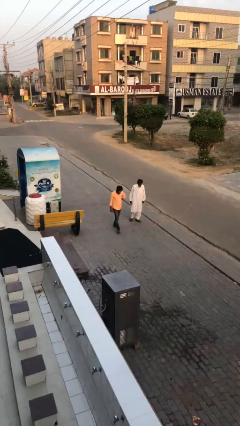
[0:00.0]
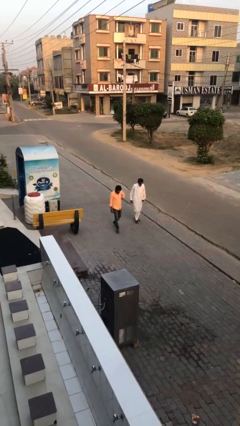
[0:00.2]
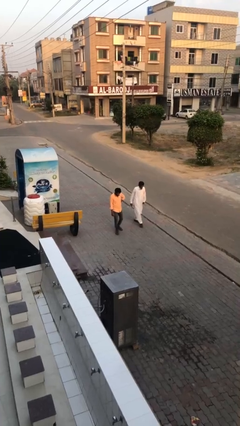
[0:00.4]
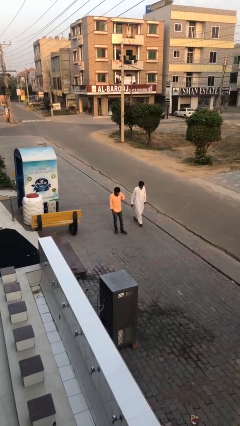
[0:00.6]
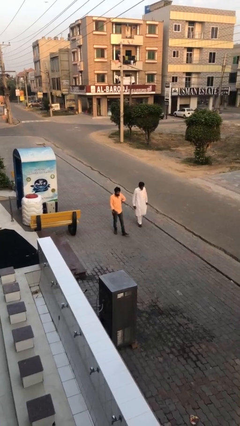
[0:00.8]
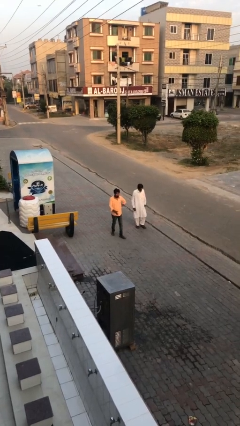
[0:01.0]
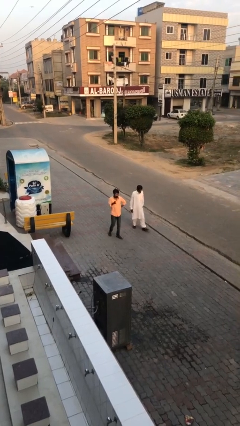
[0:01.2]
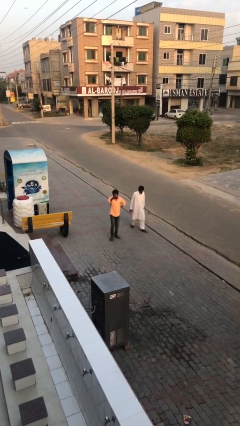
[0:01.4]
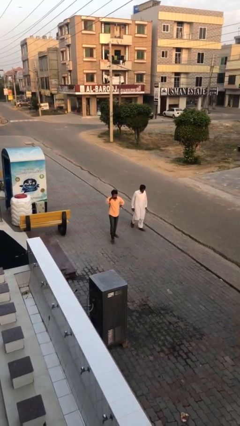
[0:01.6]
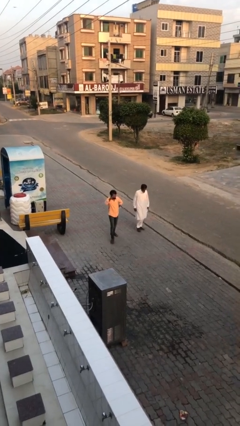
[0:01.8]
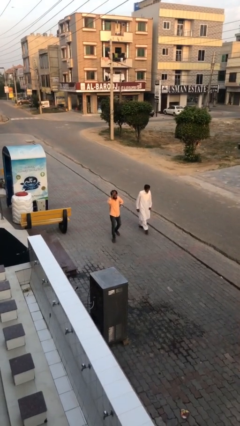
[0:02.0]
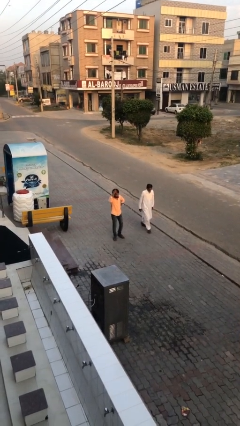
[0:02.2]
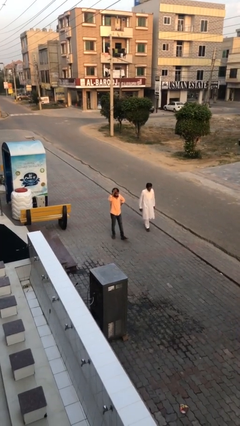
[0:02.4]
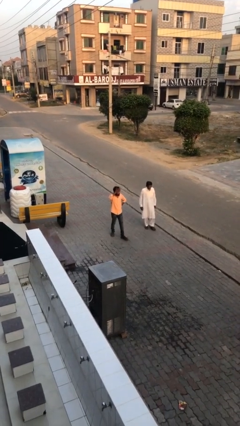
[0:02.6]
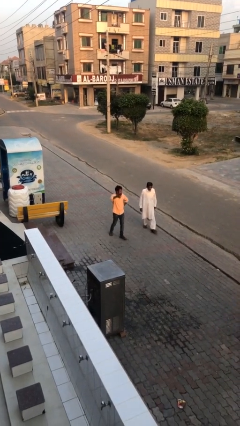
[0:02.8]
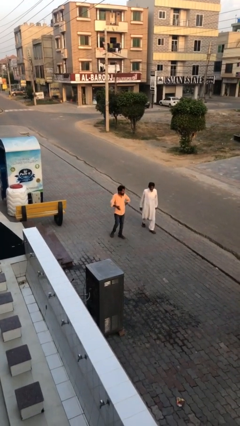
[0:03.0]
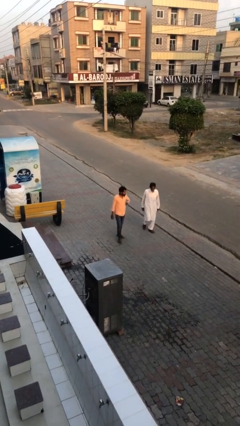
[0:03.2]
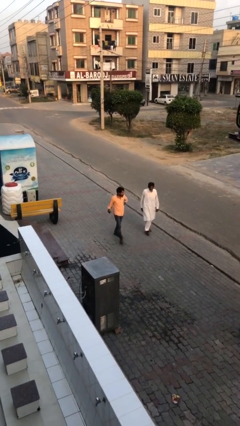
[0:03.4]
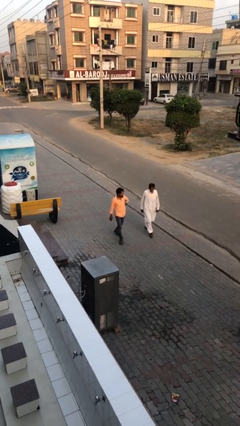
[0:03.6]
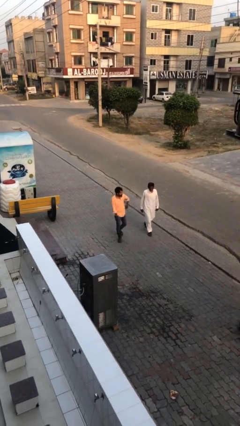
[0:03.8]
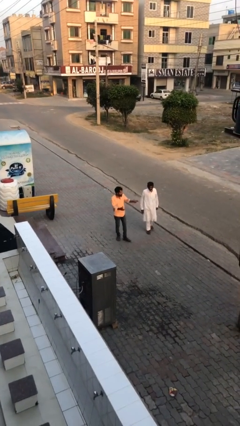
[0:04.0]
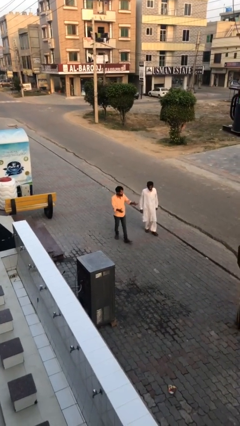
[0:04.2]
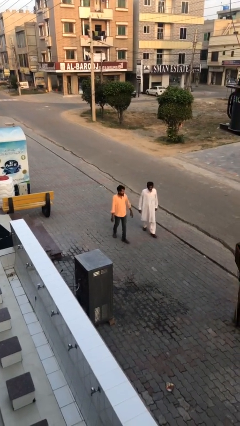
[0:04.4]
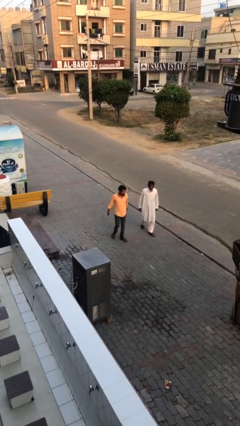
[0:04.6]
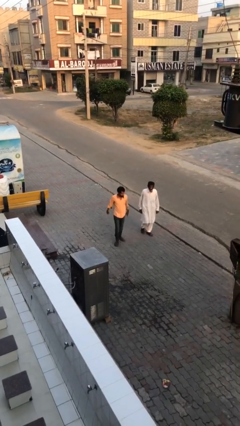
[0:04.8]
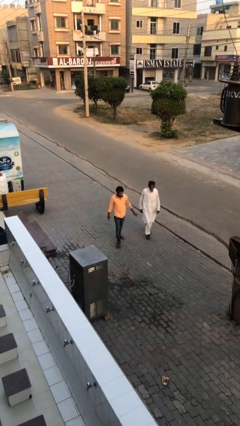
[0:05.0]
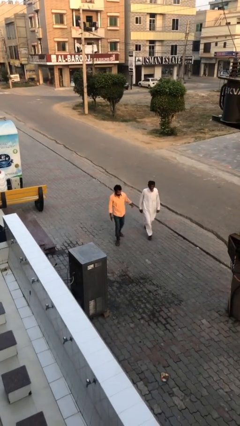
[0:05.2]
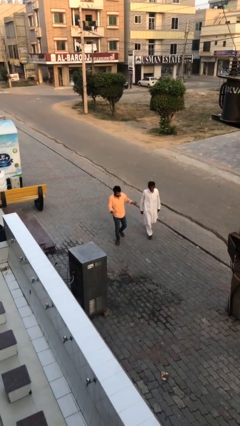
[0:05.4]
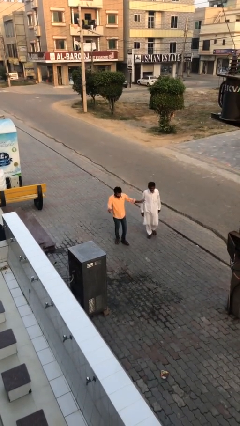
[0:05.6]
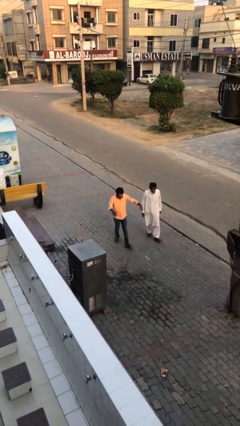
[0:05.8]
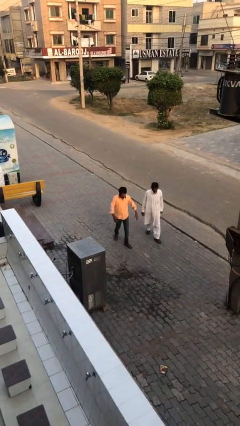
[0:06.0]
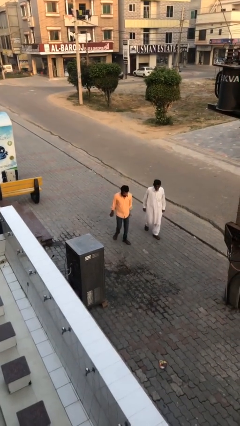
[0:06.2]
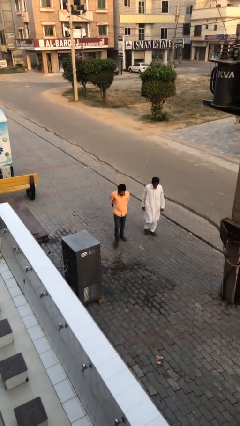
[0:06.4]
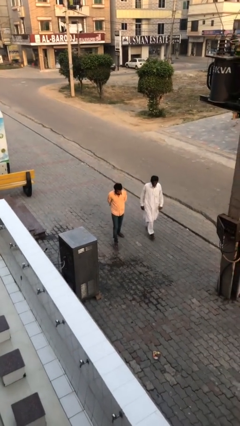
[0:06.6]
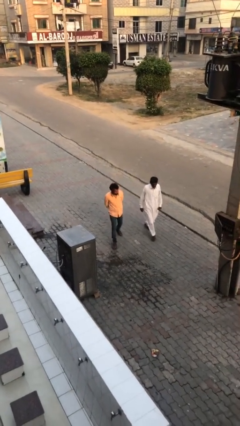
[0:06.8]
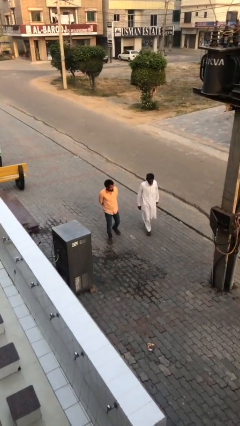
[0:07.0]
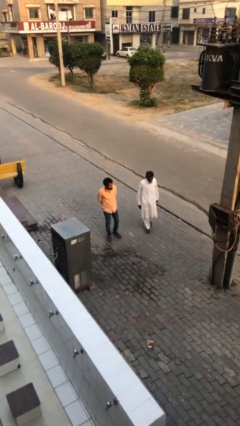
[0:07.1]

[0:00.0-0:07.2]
person talks to person

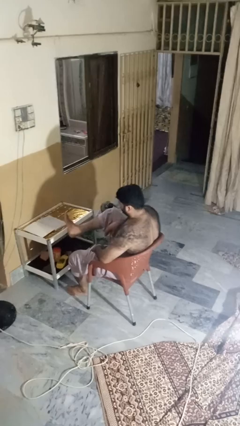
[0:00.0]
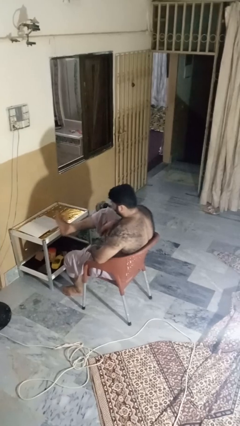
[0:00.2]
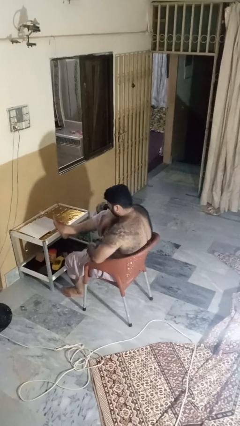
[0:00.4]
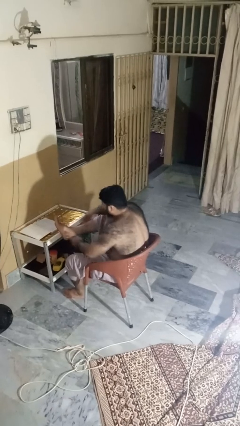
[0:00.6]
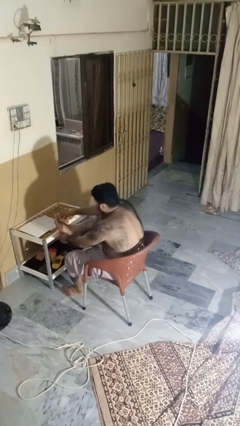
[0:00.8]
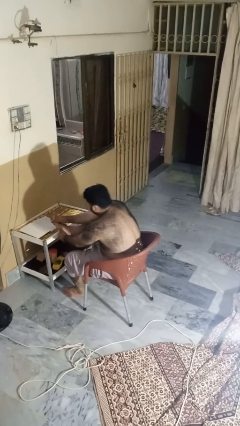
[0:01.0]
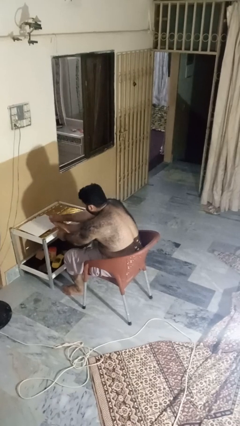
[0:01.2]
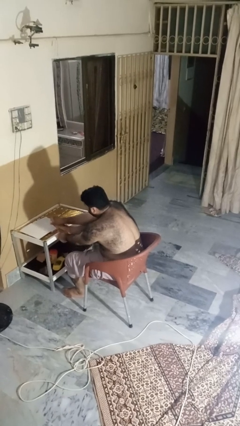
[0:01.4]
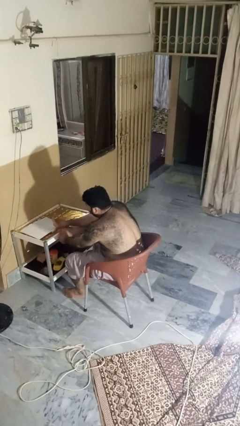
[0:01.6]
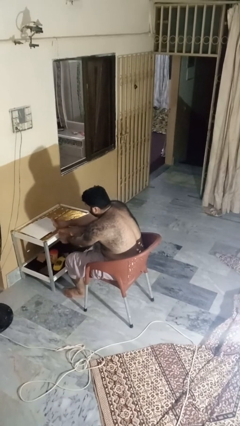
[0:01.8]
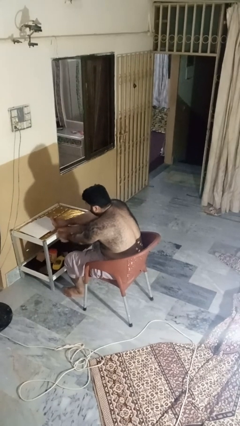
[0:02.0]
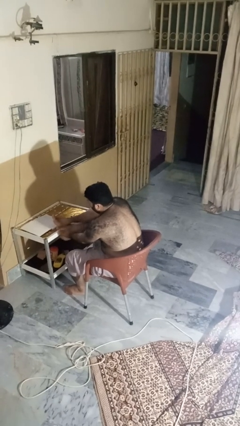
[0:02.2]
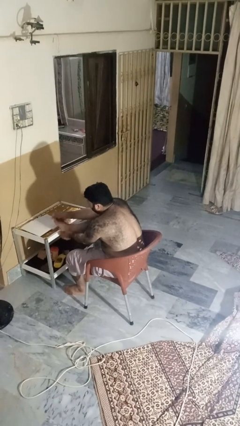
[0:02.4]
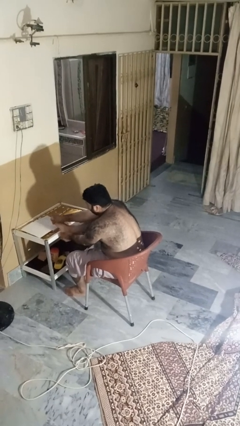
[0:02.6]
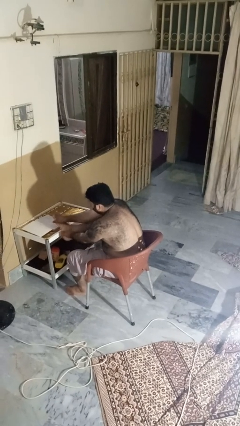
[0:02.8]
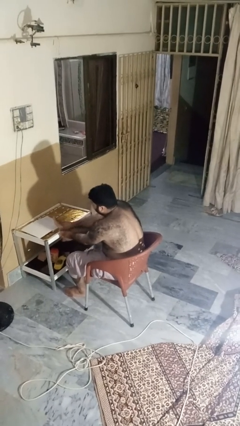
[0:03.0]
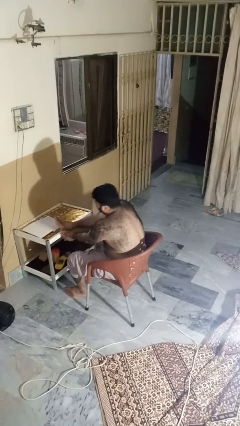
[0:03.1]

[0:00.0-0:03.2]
person stubs toe

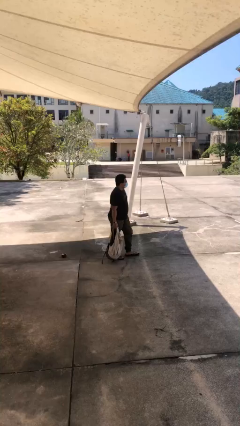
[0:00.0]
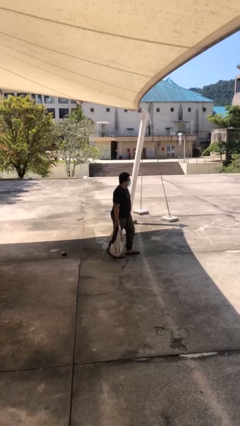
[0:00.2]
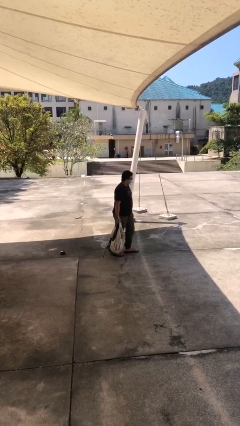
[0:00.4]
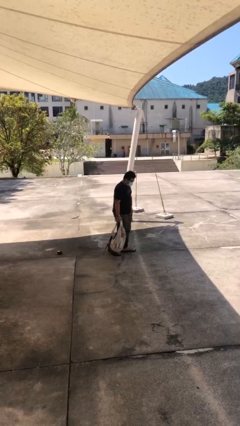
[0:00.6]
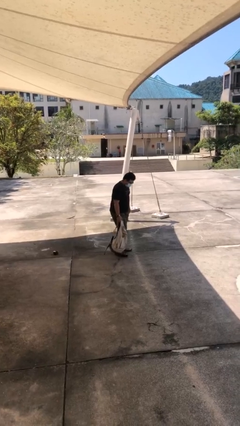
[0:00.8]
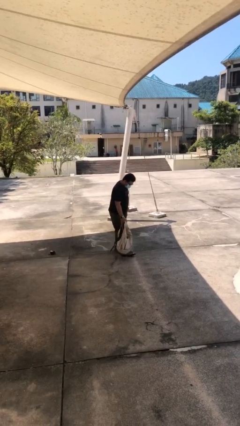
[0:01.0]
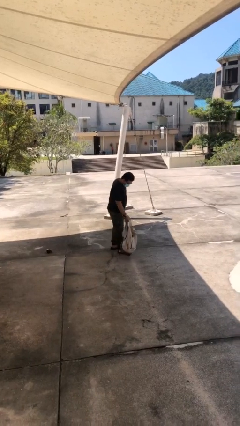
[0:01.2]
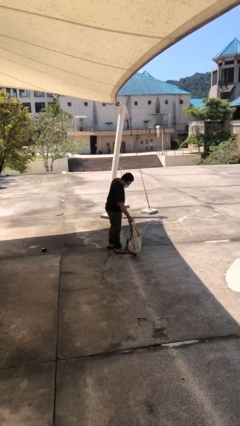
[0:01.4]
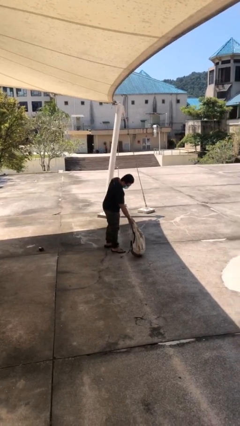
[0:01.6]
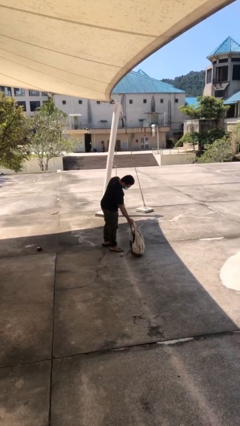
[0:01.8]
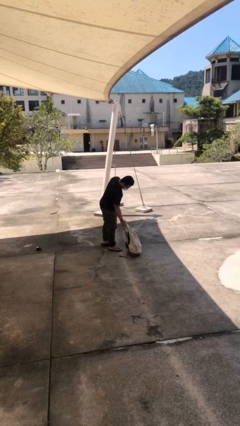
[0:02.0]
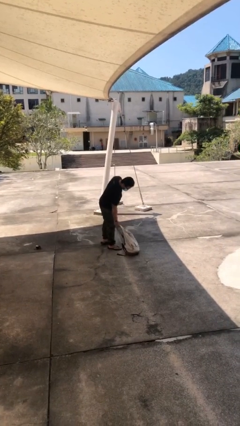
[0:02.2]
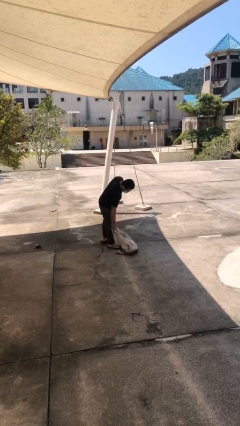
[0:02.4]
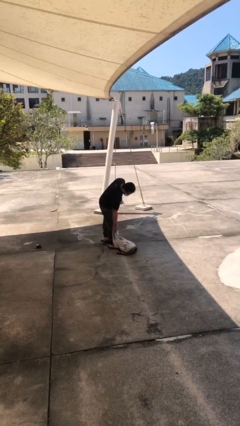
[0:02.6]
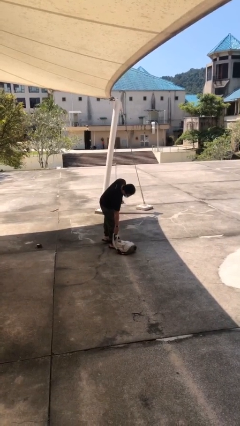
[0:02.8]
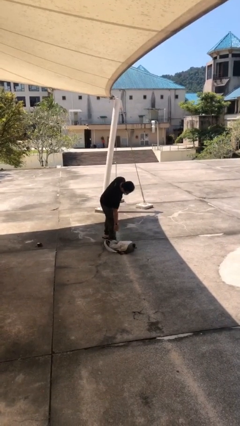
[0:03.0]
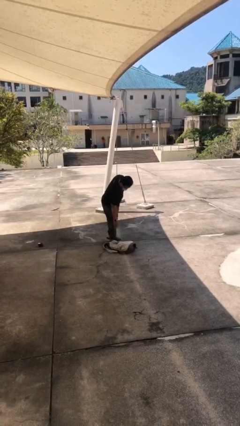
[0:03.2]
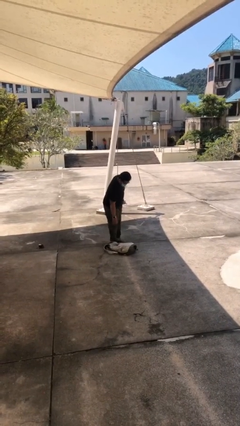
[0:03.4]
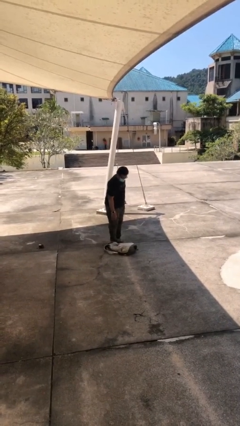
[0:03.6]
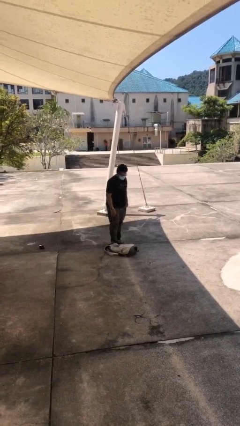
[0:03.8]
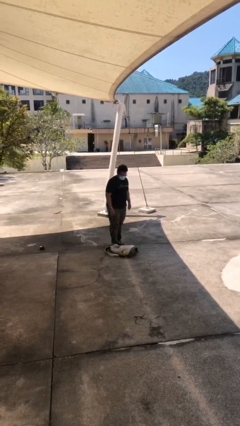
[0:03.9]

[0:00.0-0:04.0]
person puts down object on floor

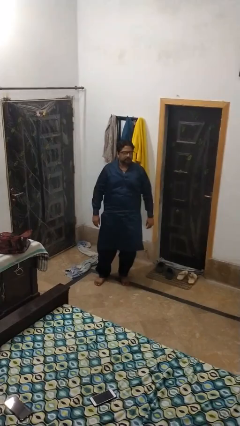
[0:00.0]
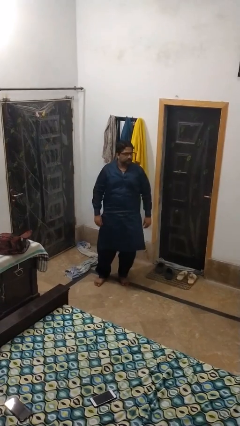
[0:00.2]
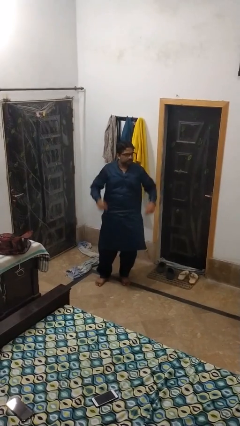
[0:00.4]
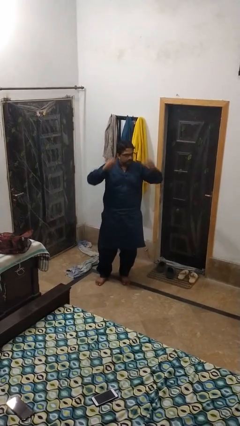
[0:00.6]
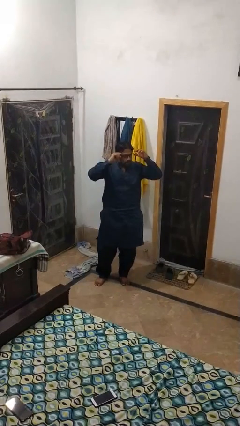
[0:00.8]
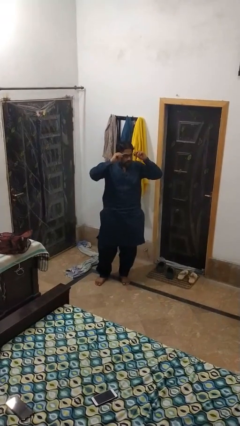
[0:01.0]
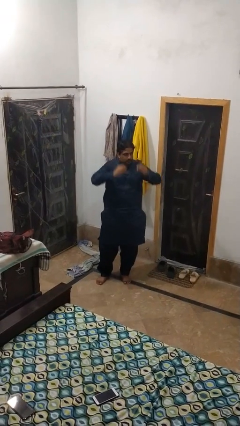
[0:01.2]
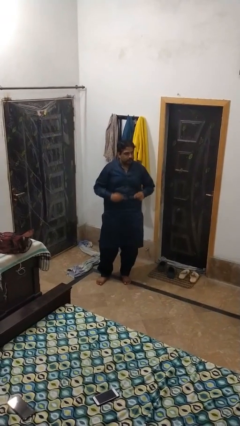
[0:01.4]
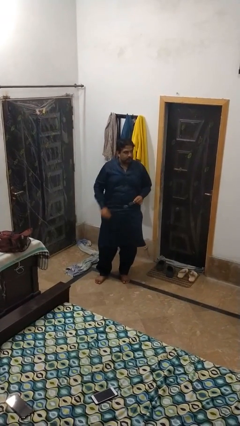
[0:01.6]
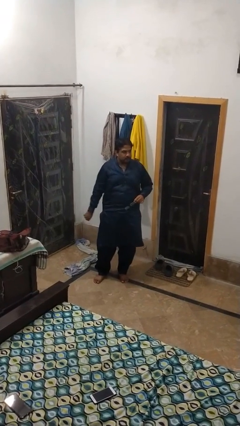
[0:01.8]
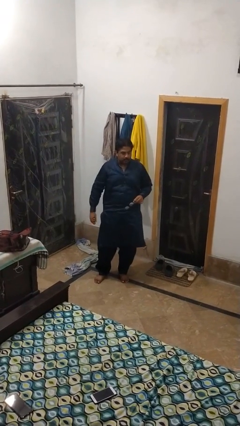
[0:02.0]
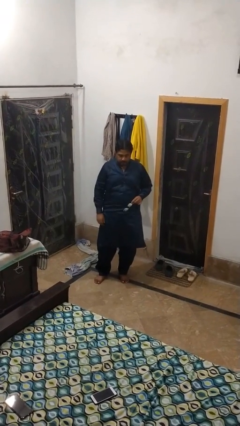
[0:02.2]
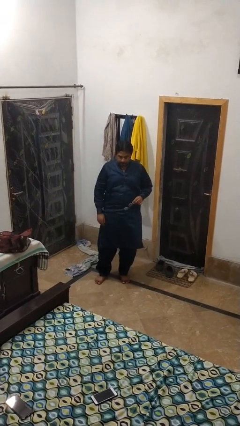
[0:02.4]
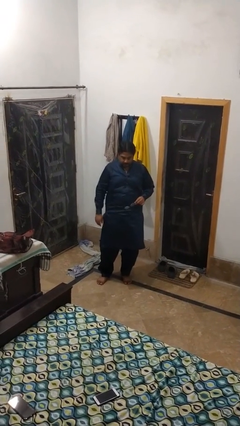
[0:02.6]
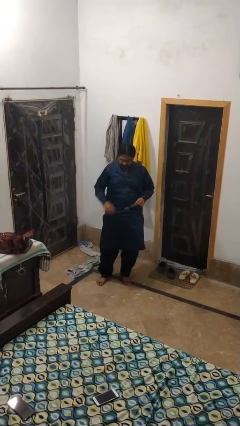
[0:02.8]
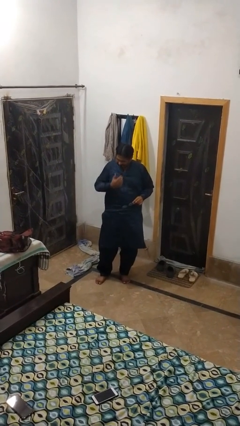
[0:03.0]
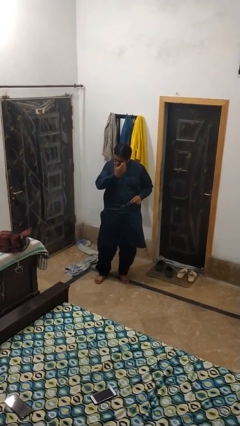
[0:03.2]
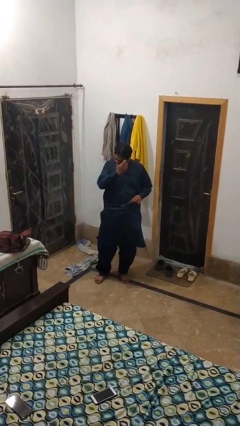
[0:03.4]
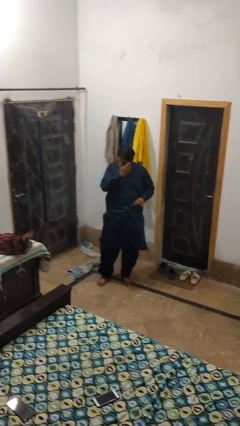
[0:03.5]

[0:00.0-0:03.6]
person takes off glasses
